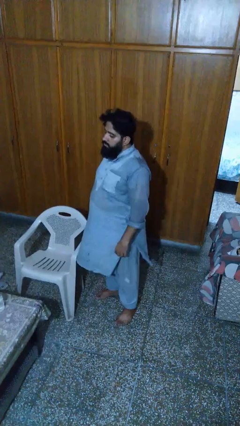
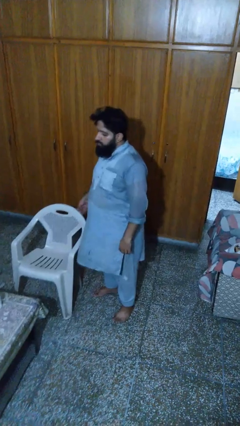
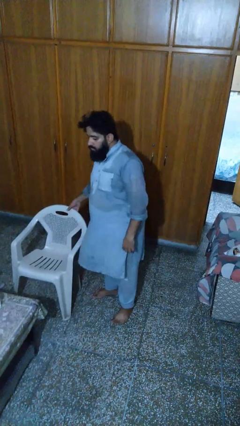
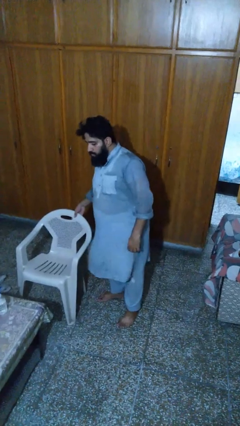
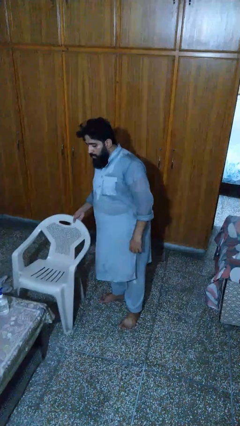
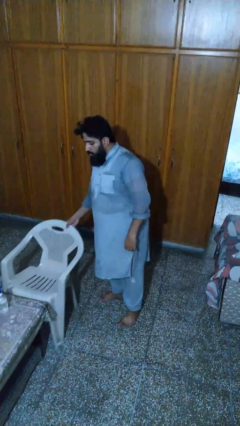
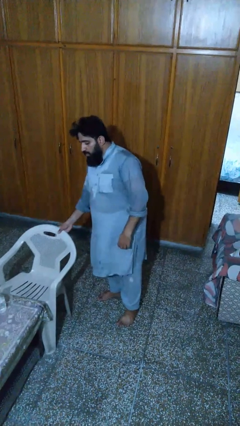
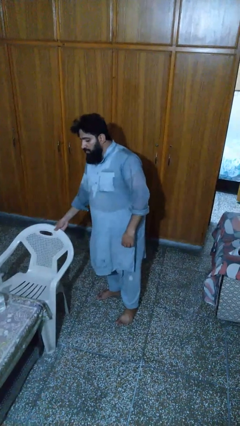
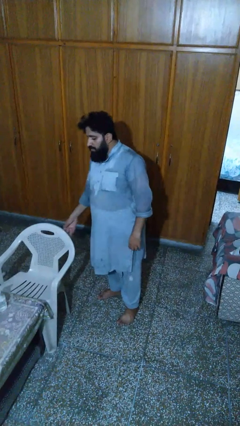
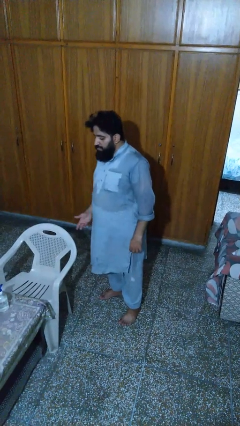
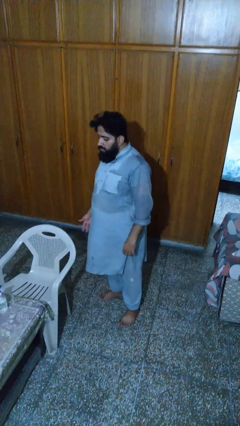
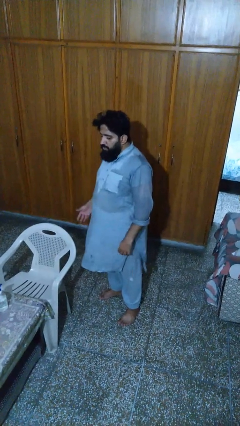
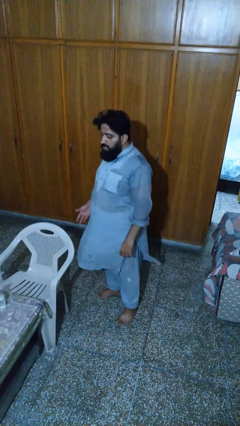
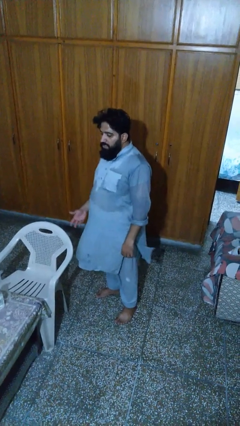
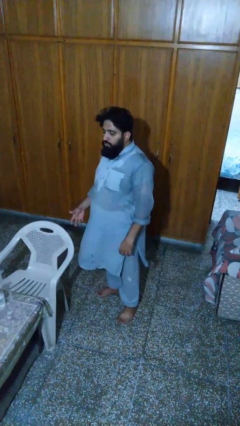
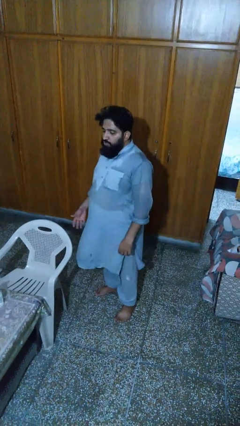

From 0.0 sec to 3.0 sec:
person pushes in chair

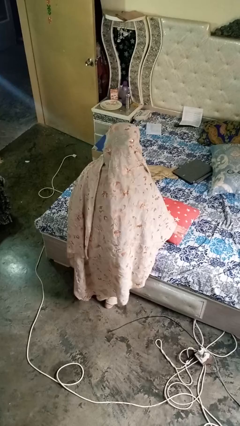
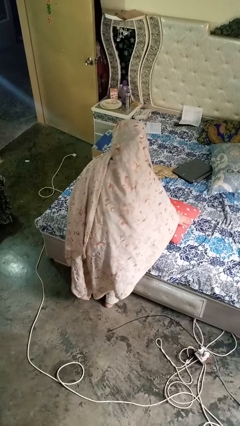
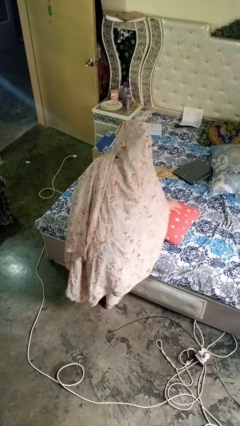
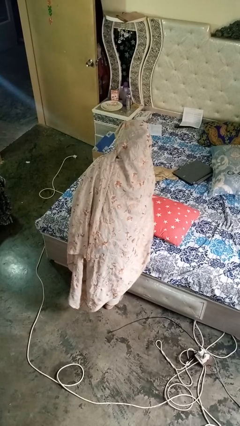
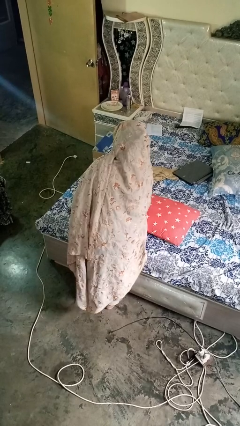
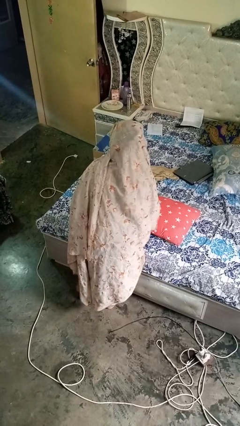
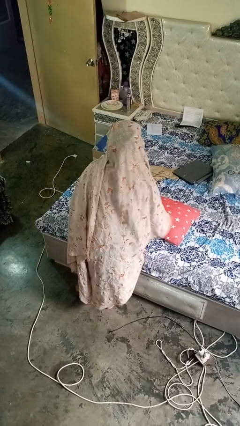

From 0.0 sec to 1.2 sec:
person waves hand over object

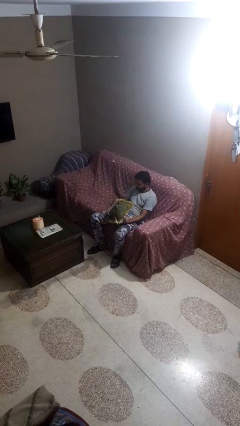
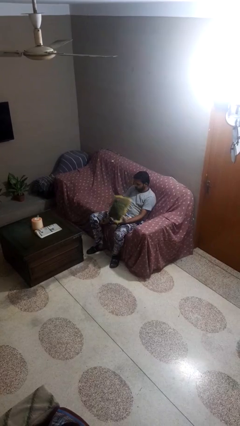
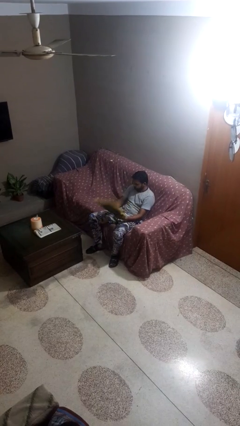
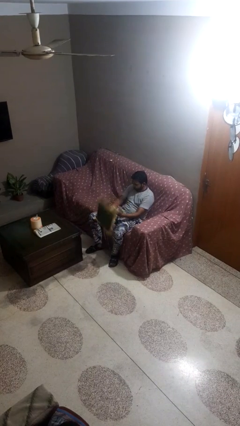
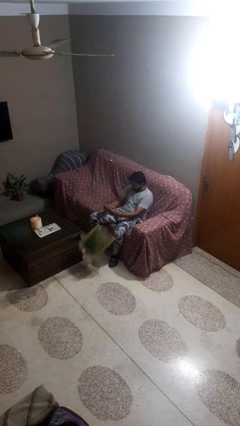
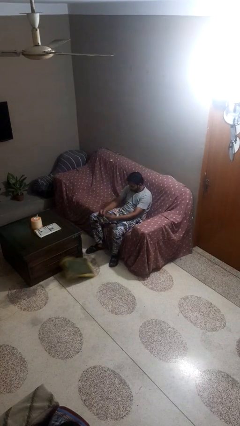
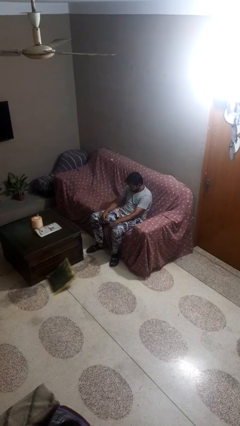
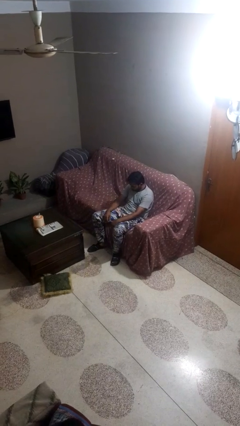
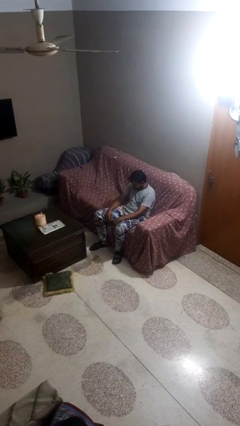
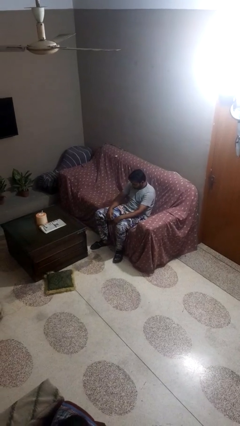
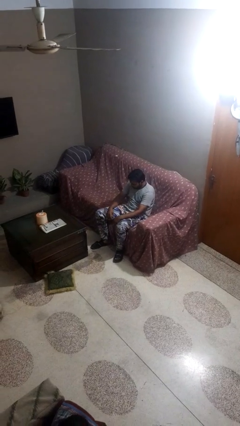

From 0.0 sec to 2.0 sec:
person drops object

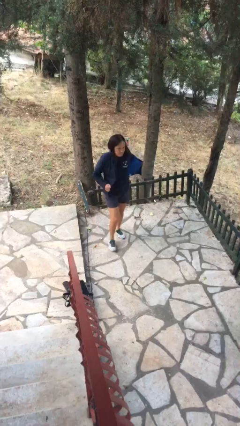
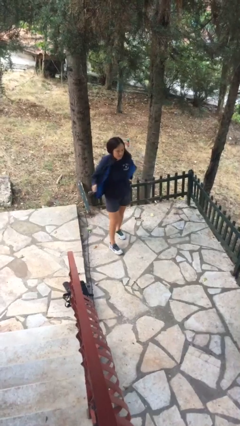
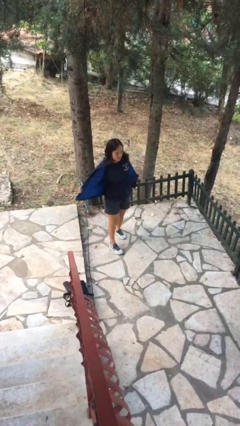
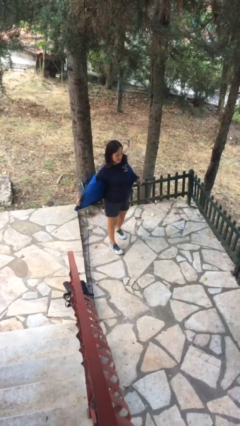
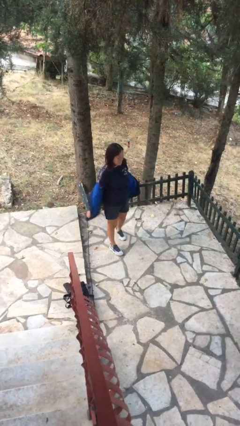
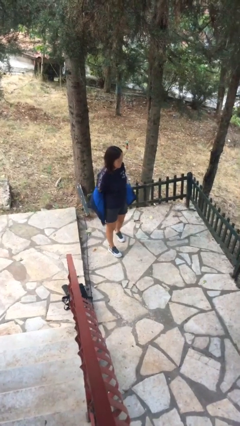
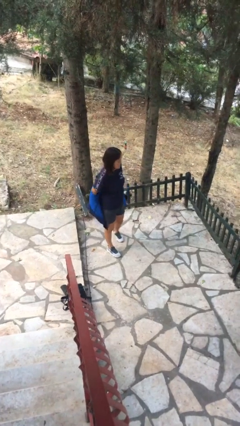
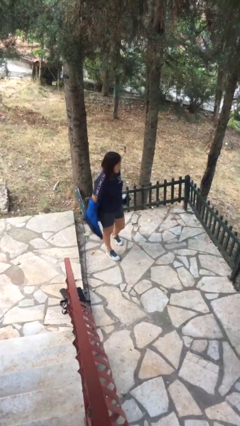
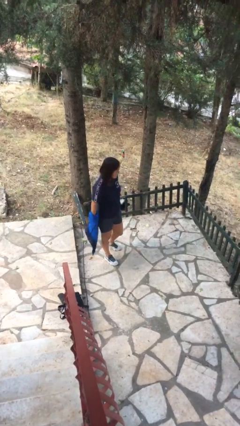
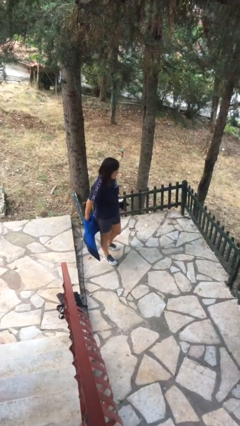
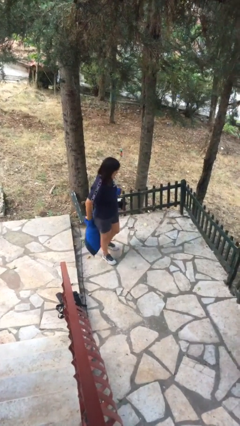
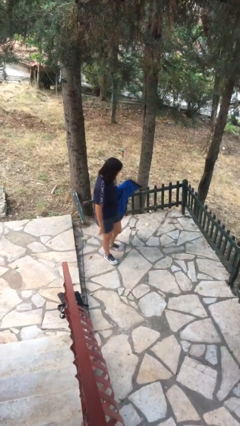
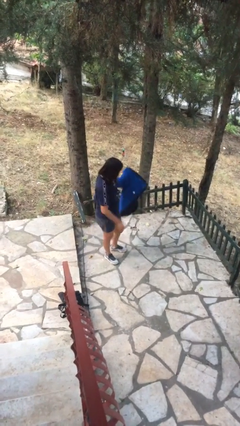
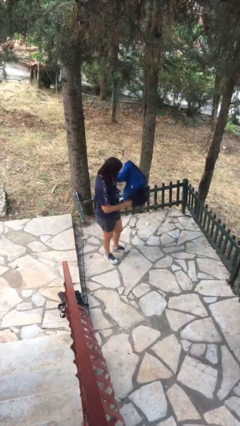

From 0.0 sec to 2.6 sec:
person takes off jacket

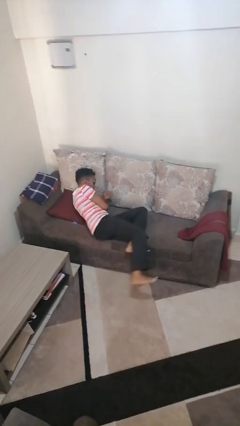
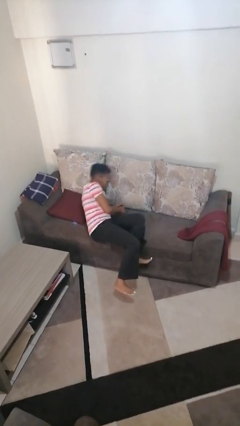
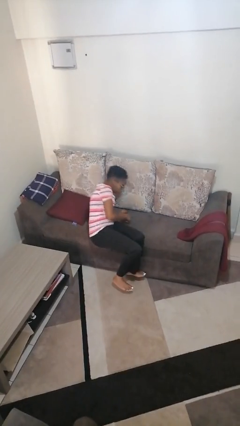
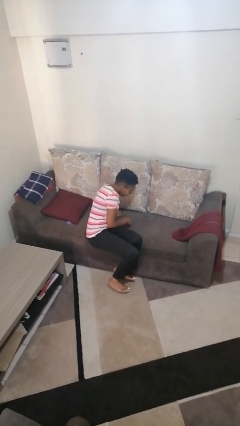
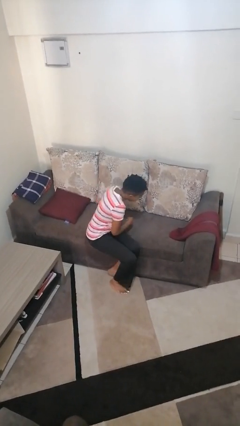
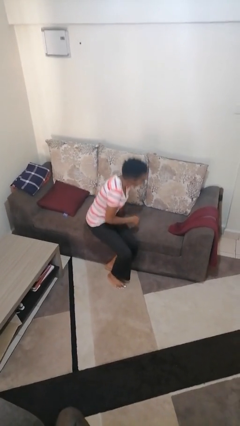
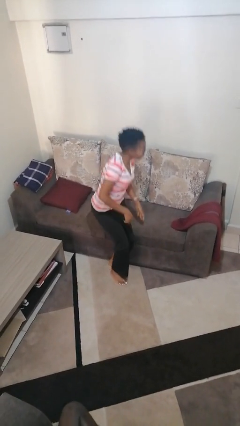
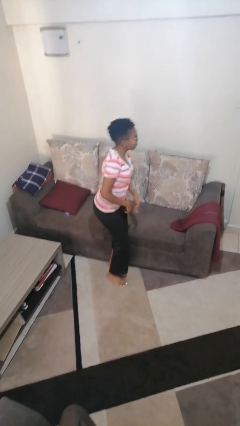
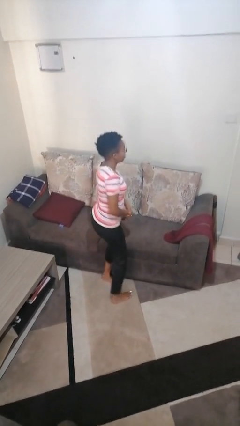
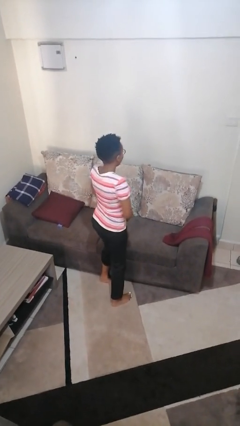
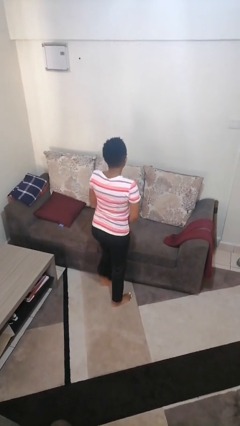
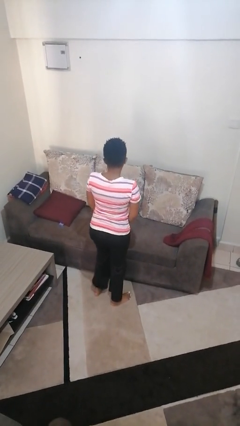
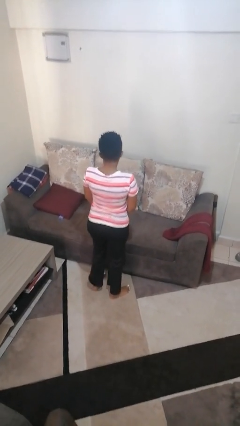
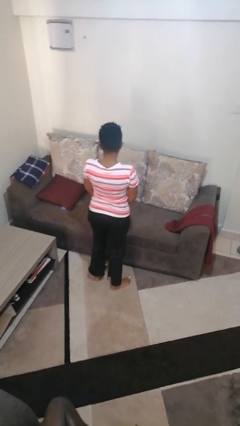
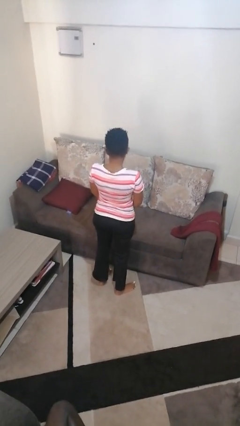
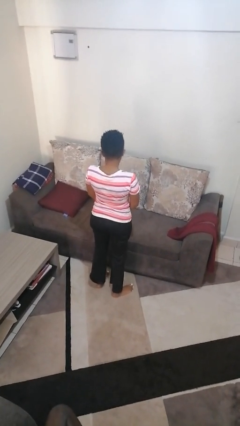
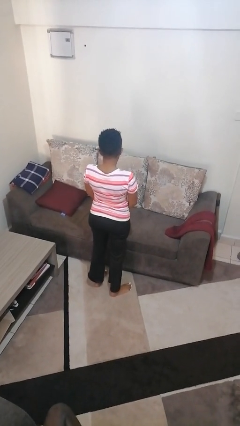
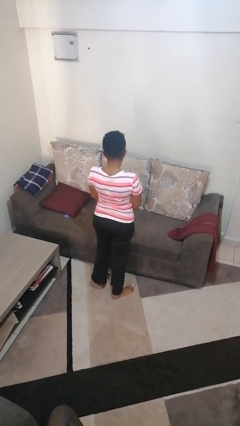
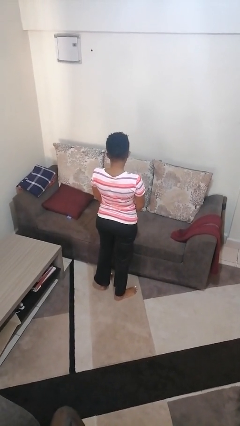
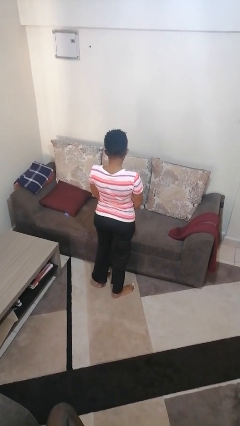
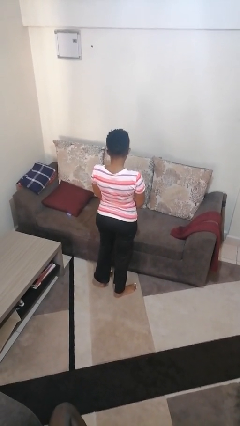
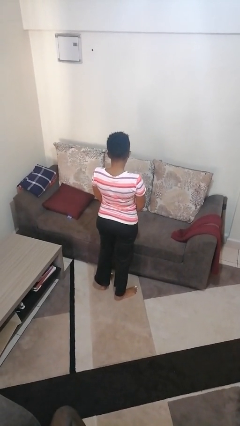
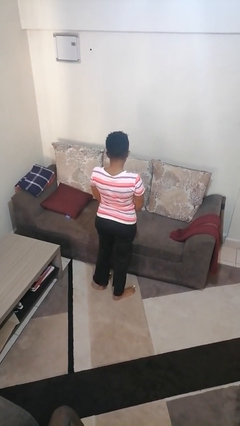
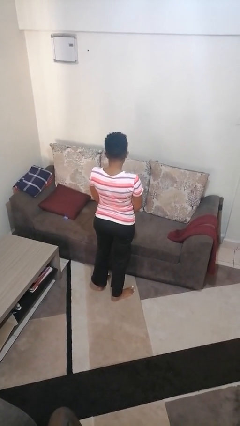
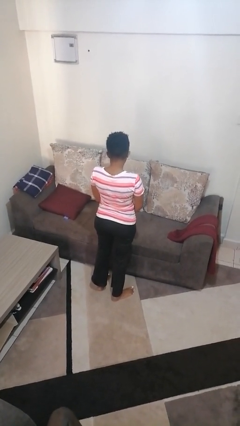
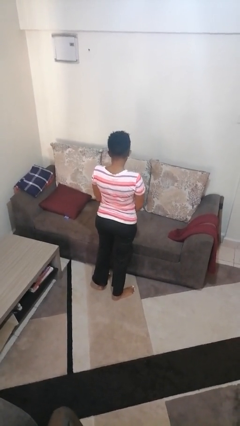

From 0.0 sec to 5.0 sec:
person stands up

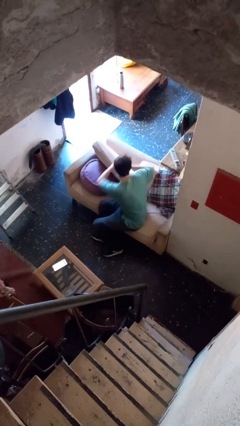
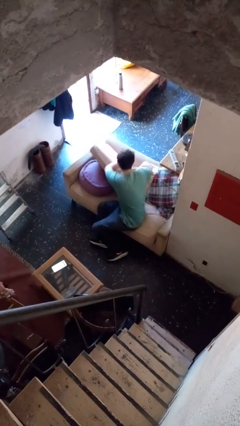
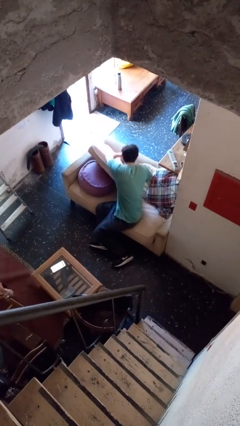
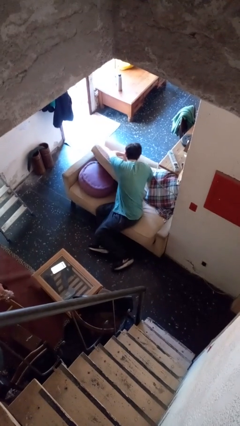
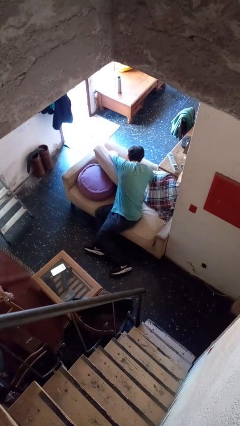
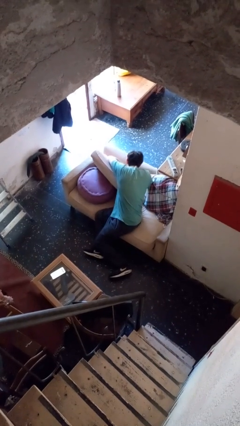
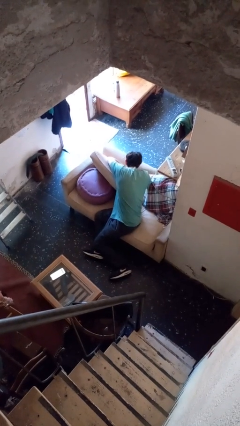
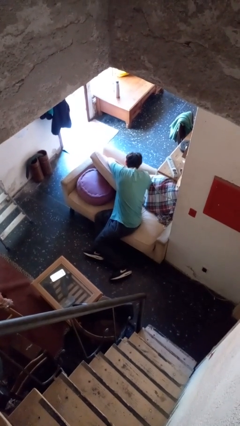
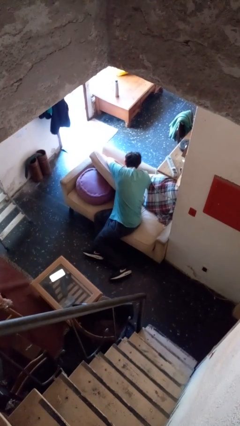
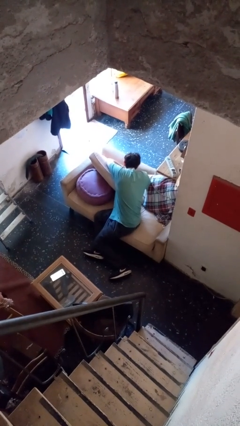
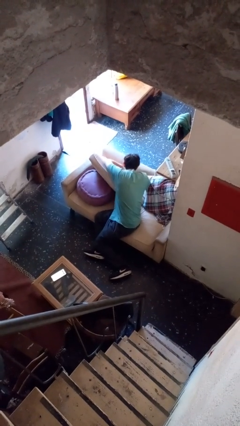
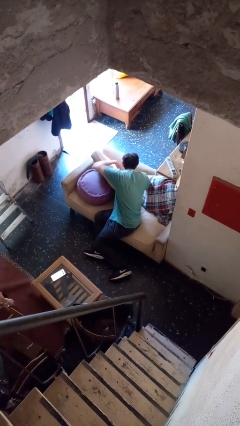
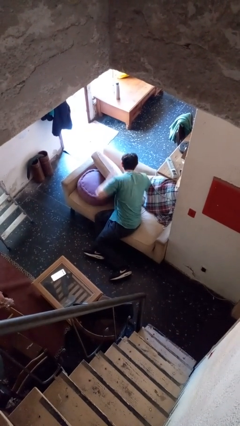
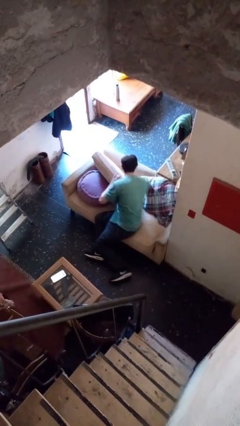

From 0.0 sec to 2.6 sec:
person searches in couch

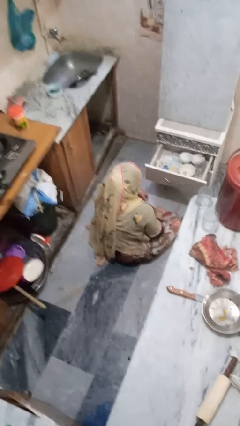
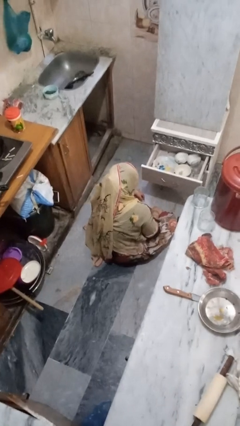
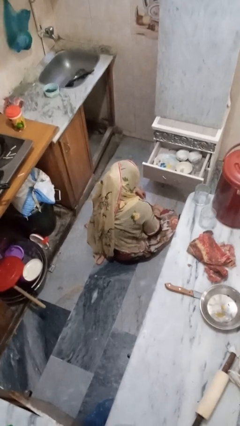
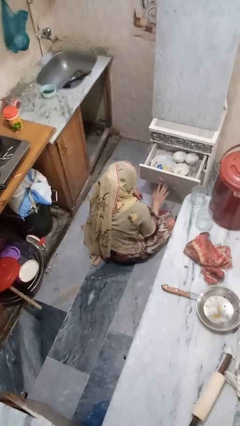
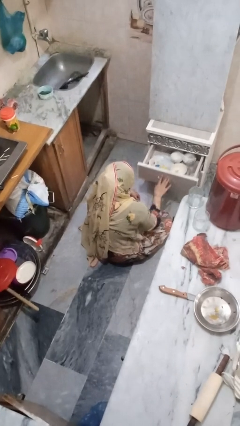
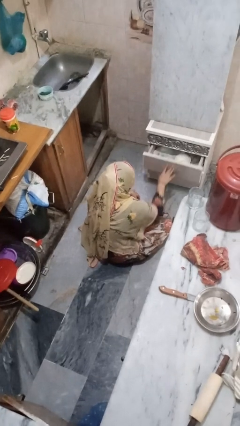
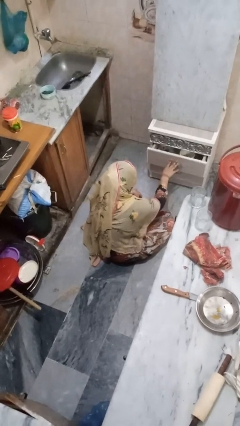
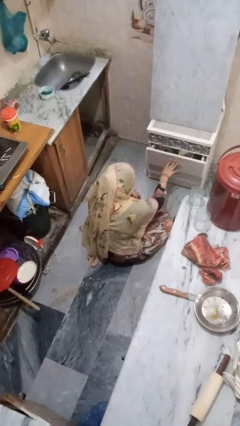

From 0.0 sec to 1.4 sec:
person closes kitchen drawer
